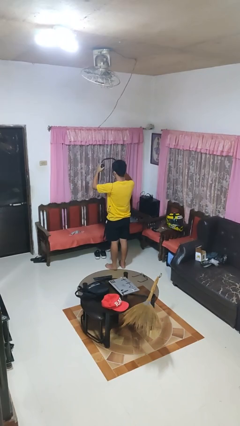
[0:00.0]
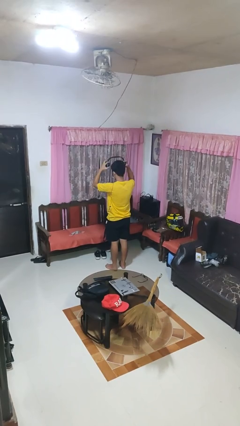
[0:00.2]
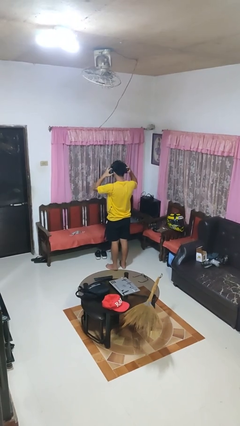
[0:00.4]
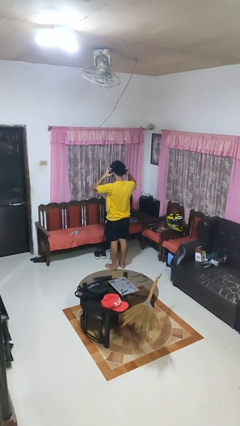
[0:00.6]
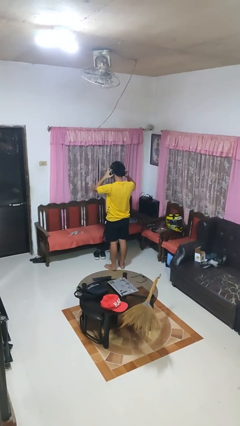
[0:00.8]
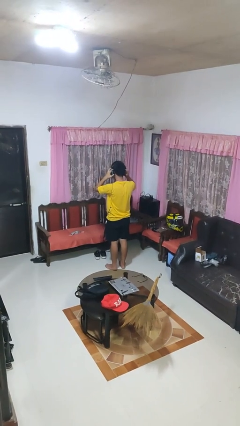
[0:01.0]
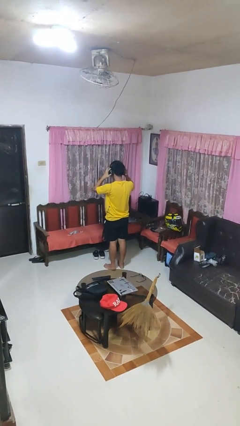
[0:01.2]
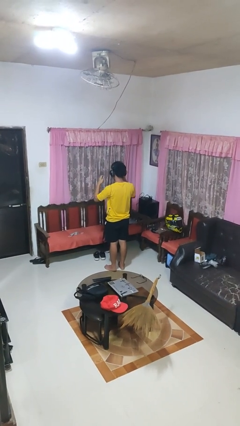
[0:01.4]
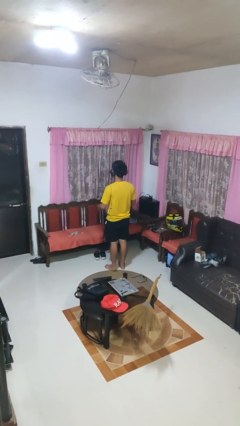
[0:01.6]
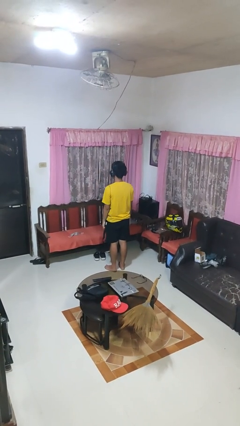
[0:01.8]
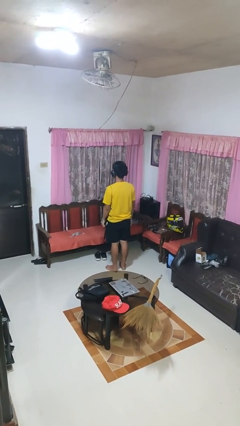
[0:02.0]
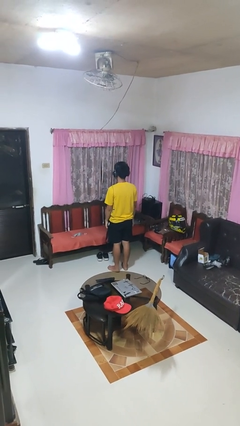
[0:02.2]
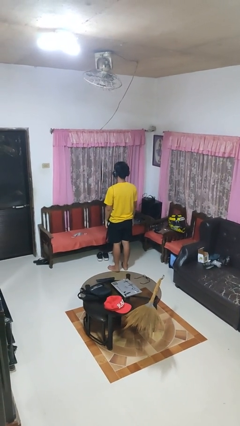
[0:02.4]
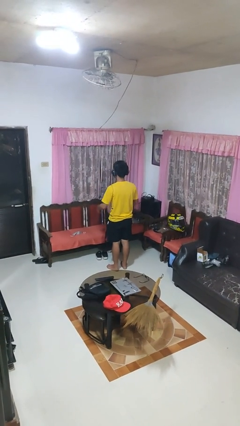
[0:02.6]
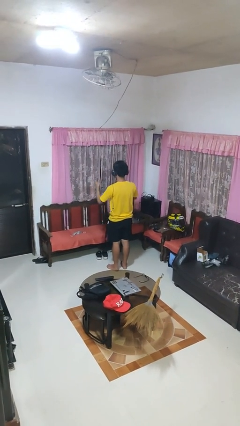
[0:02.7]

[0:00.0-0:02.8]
person puts on headphones

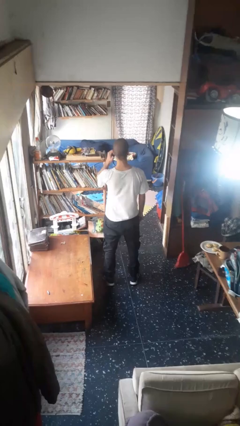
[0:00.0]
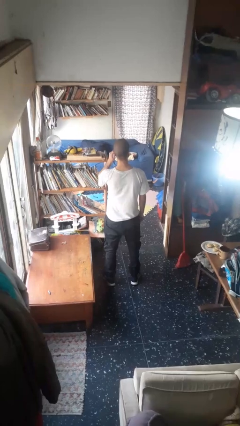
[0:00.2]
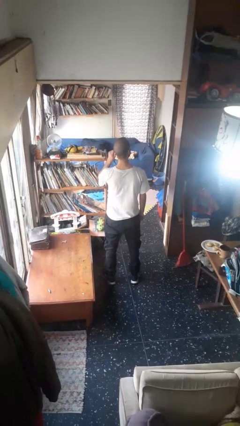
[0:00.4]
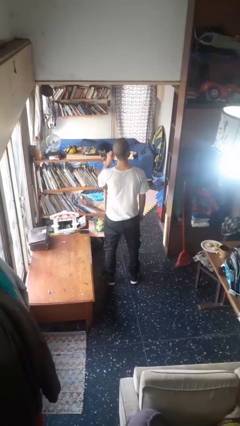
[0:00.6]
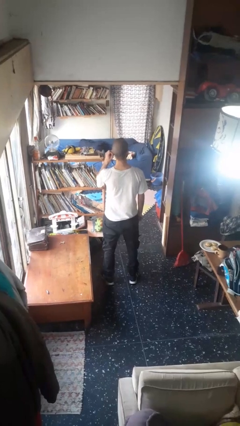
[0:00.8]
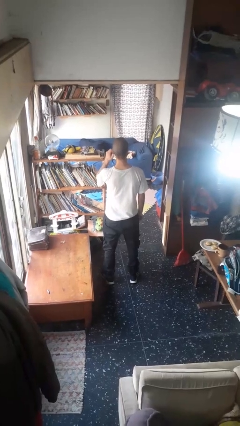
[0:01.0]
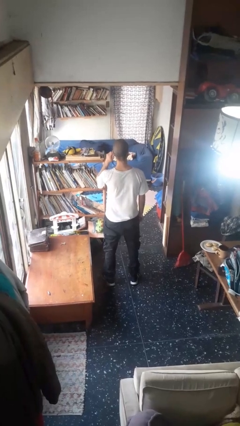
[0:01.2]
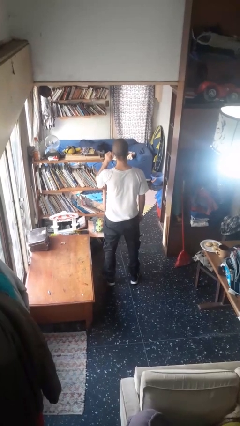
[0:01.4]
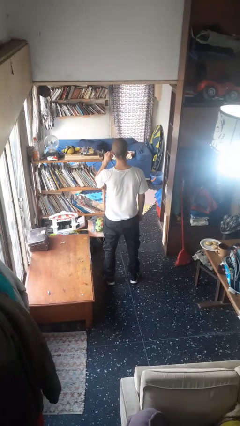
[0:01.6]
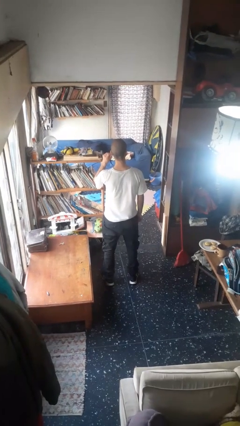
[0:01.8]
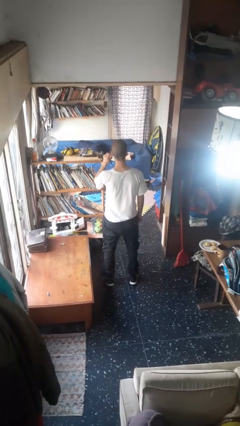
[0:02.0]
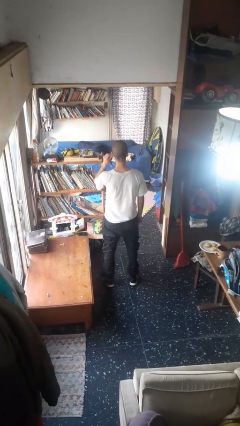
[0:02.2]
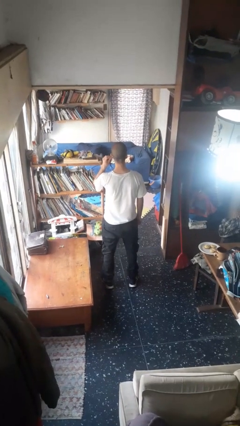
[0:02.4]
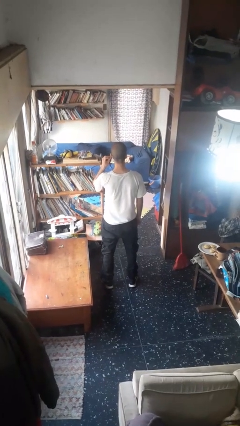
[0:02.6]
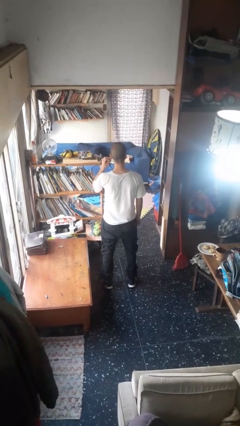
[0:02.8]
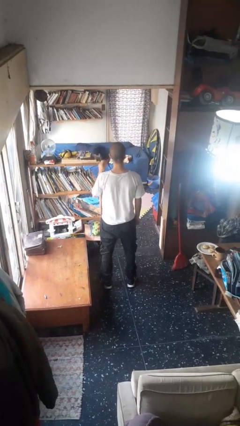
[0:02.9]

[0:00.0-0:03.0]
person touches earlobe

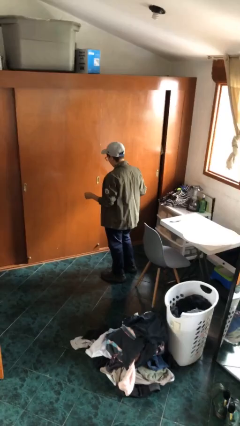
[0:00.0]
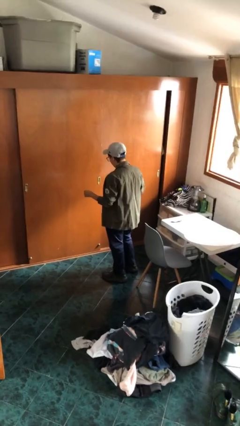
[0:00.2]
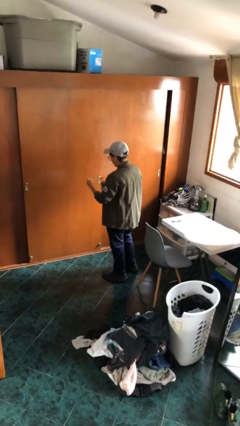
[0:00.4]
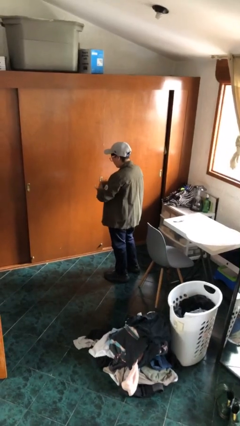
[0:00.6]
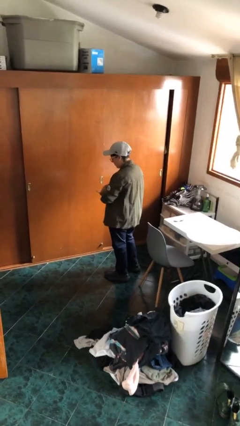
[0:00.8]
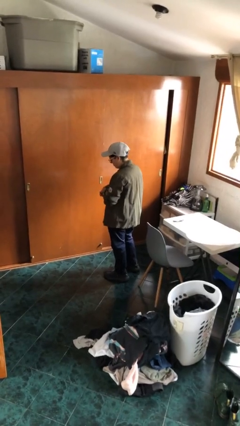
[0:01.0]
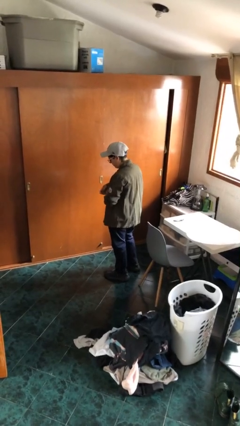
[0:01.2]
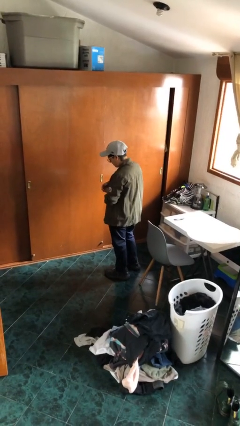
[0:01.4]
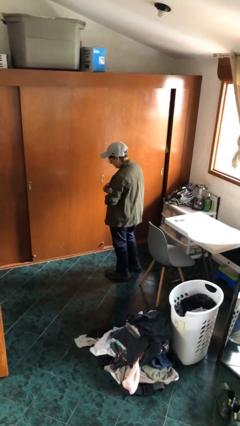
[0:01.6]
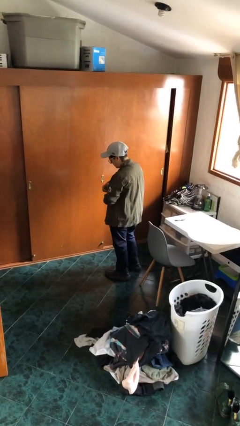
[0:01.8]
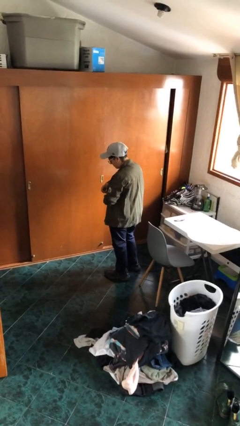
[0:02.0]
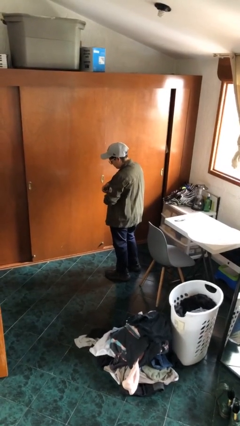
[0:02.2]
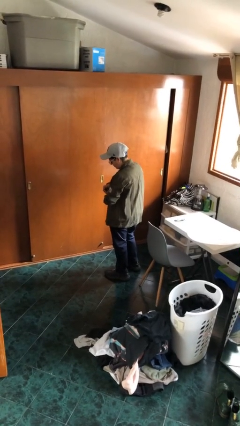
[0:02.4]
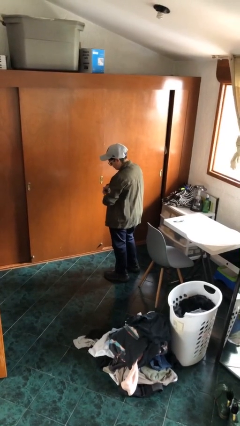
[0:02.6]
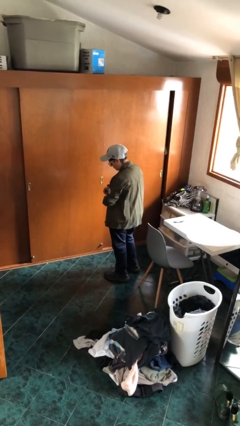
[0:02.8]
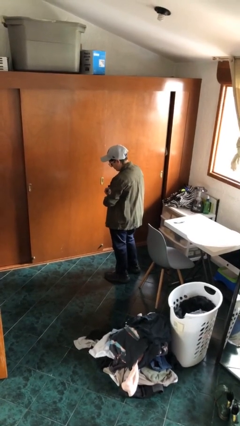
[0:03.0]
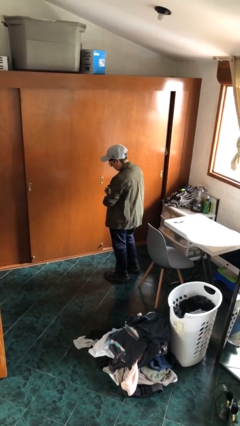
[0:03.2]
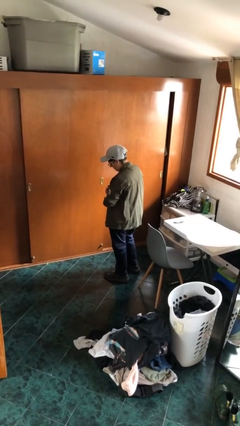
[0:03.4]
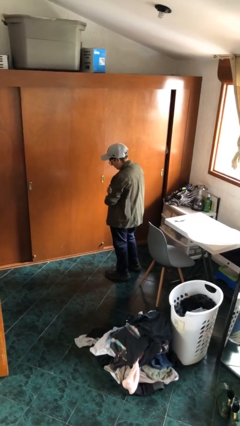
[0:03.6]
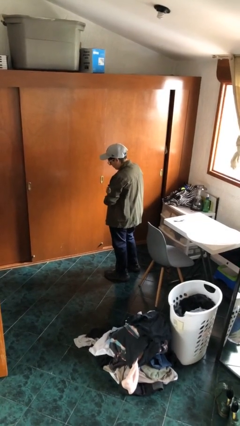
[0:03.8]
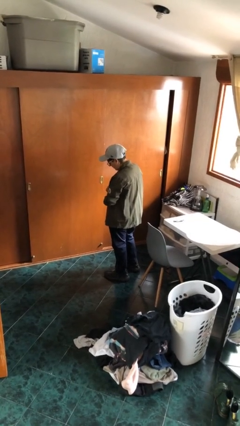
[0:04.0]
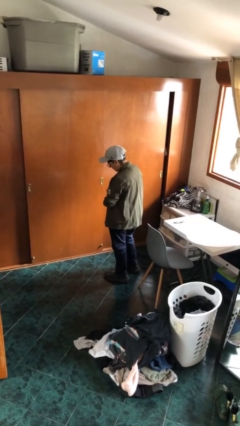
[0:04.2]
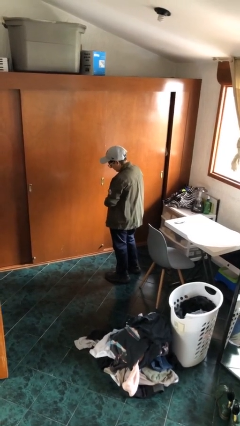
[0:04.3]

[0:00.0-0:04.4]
person puts on wristwatch

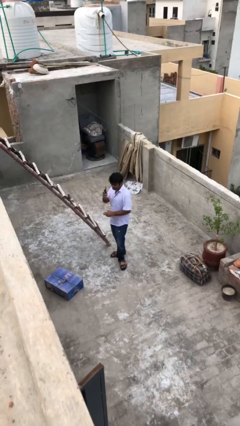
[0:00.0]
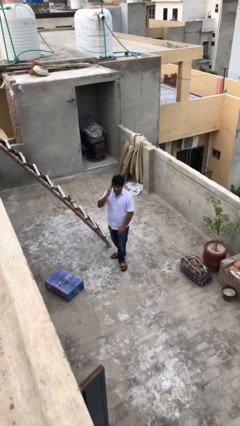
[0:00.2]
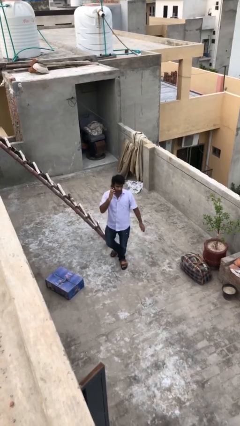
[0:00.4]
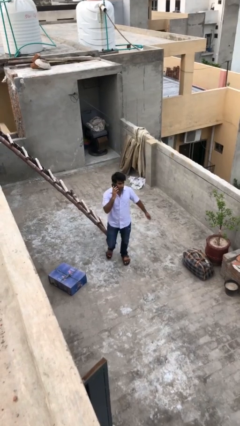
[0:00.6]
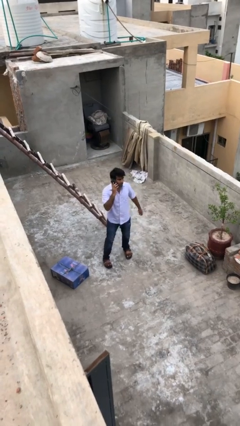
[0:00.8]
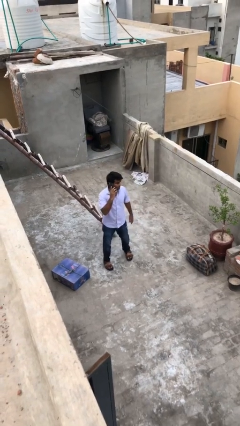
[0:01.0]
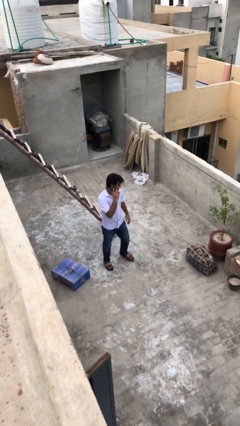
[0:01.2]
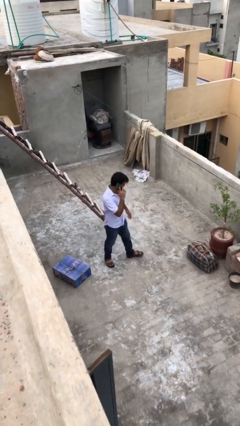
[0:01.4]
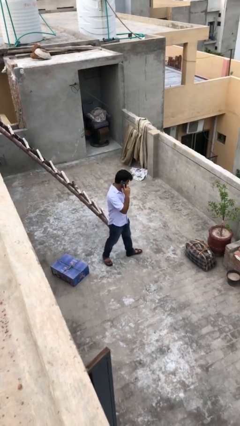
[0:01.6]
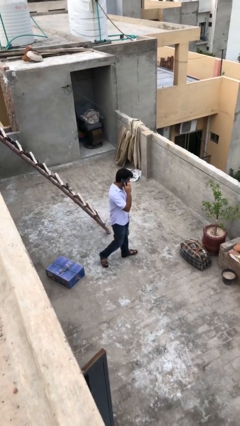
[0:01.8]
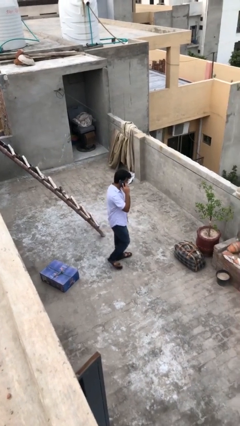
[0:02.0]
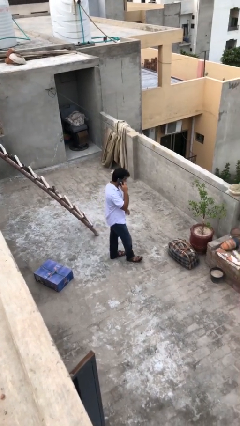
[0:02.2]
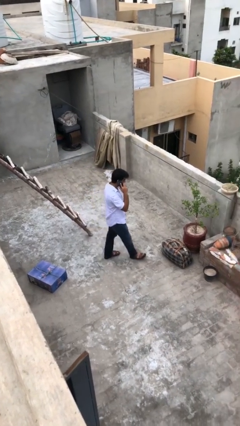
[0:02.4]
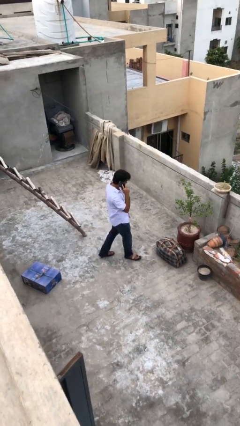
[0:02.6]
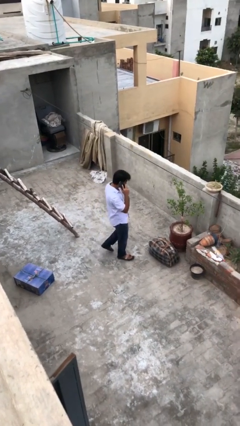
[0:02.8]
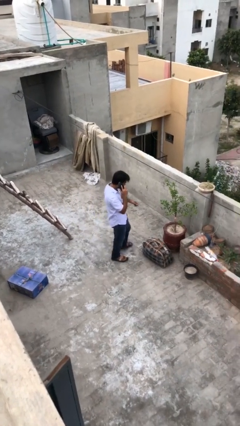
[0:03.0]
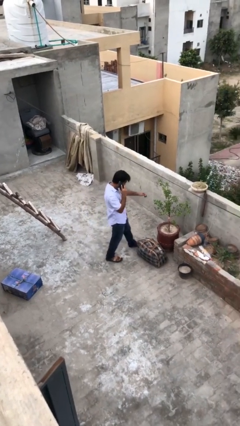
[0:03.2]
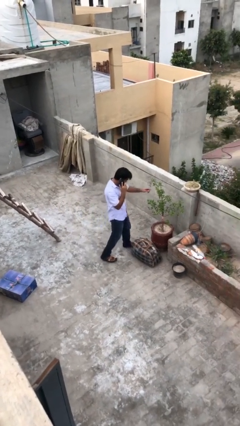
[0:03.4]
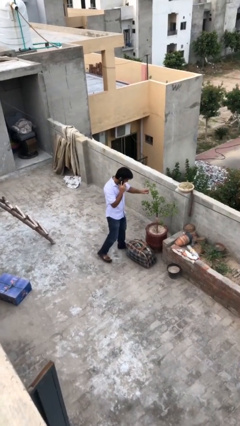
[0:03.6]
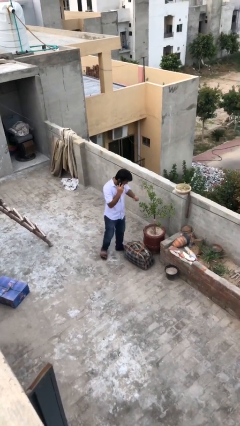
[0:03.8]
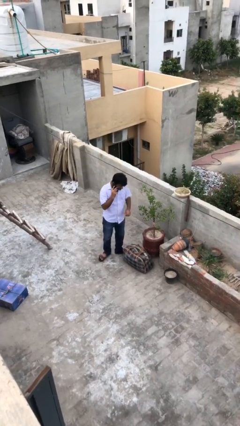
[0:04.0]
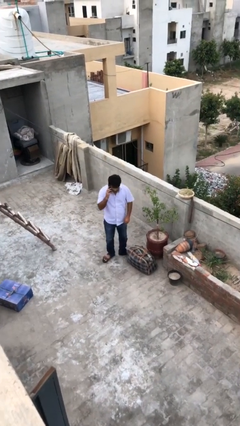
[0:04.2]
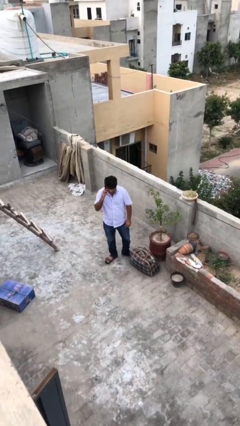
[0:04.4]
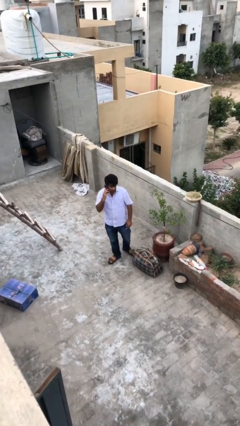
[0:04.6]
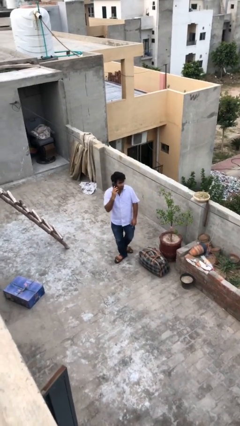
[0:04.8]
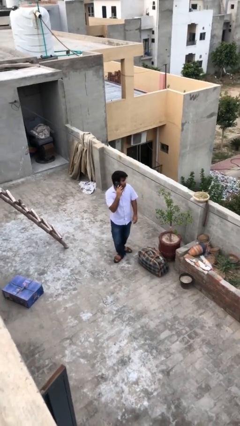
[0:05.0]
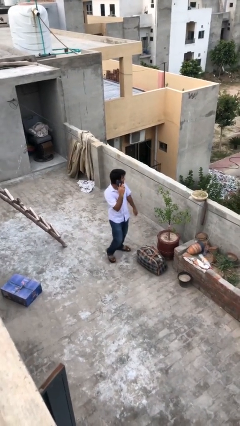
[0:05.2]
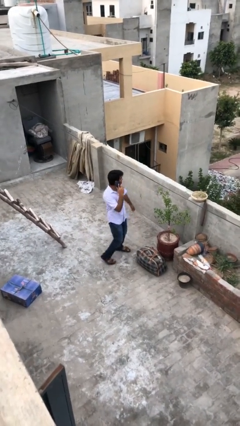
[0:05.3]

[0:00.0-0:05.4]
person talks on phone

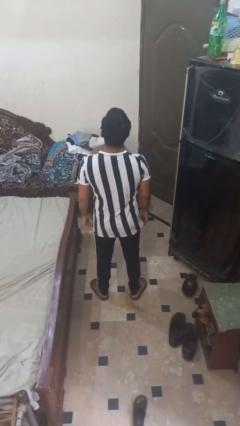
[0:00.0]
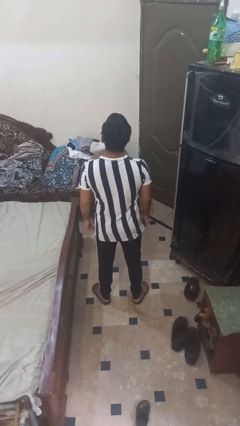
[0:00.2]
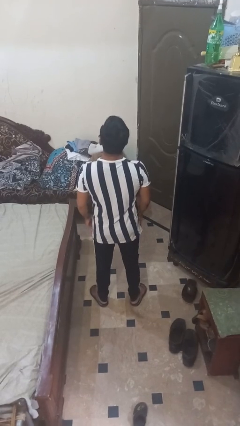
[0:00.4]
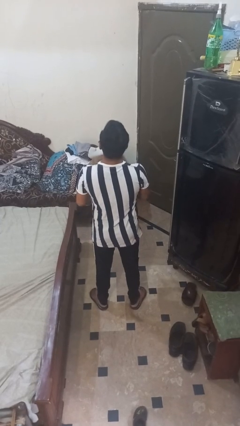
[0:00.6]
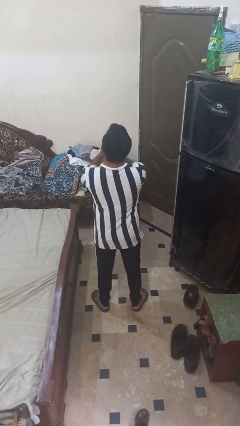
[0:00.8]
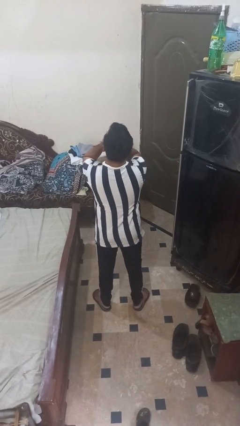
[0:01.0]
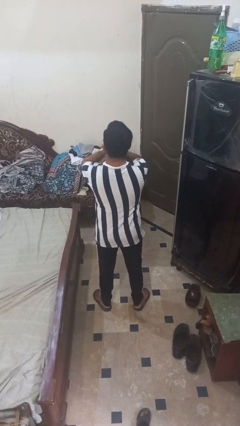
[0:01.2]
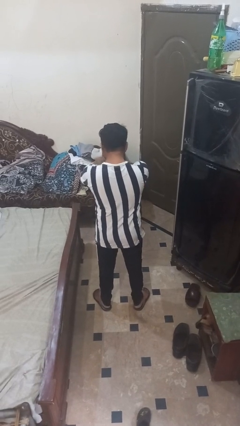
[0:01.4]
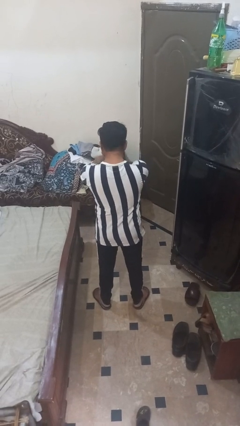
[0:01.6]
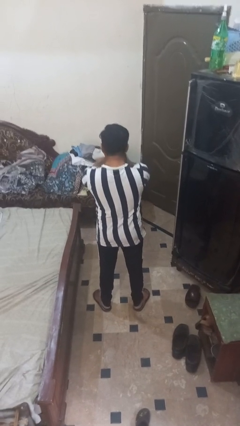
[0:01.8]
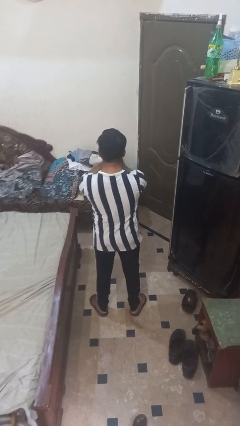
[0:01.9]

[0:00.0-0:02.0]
person sneezes into hand
